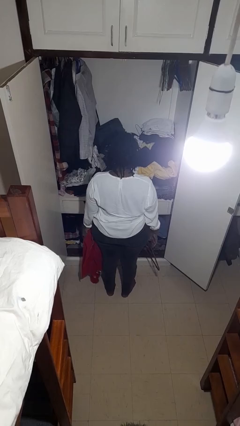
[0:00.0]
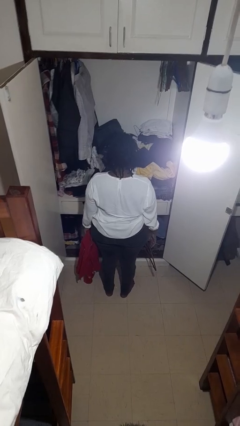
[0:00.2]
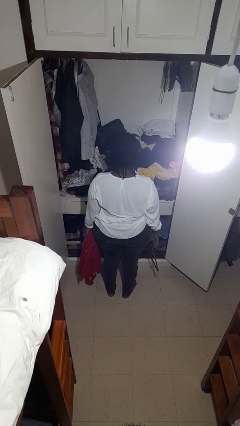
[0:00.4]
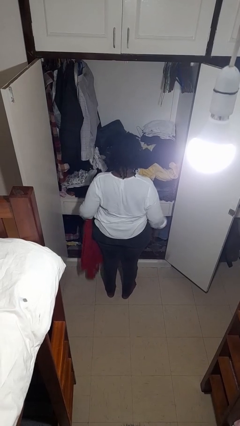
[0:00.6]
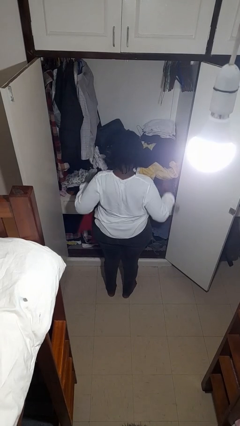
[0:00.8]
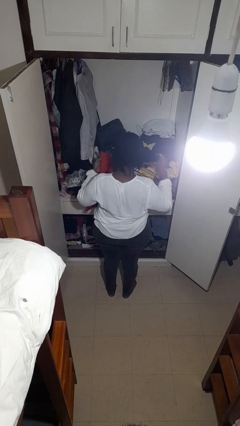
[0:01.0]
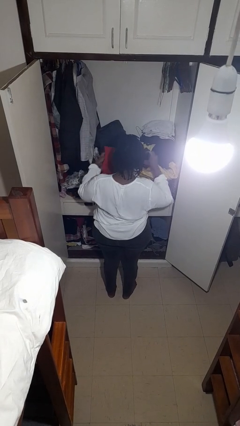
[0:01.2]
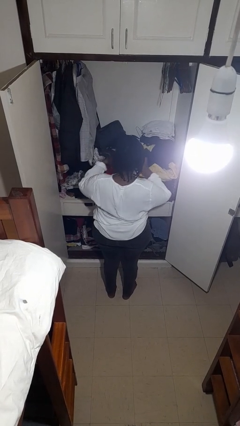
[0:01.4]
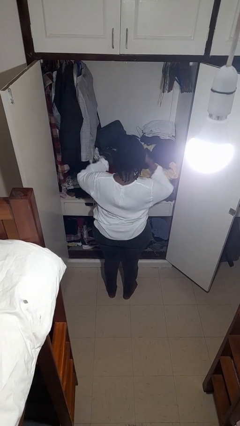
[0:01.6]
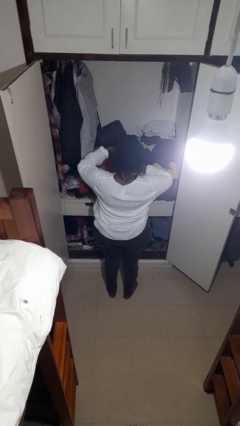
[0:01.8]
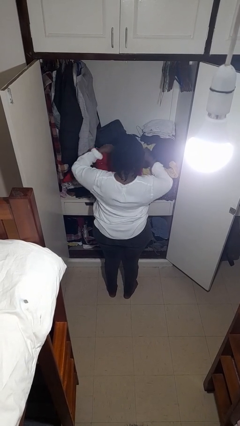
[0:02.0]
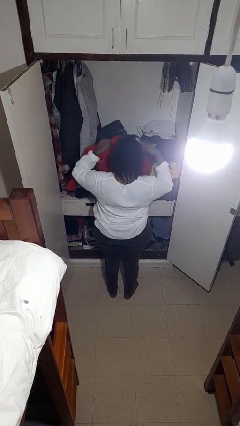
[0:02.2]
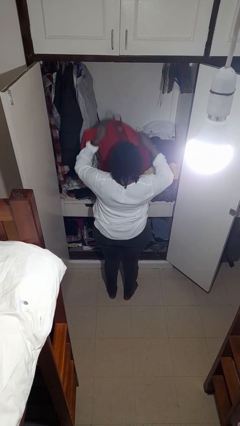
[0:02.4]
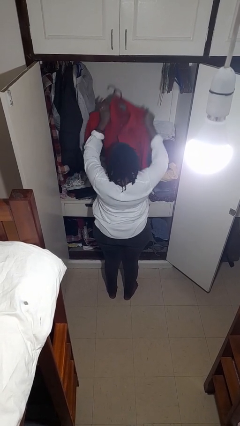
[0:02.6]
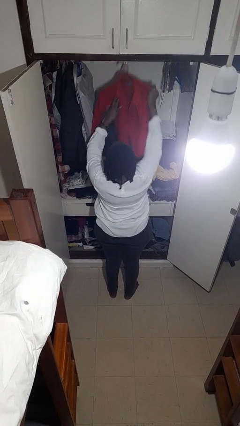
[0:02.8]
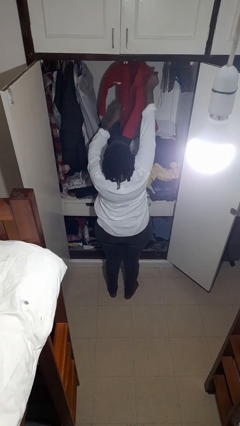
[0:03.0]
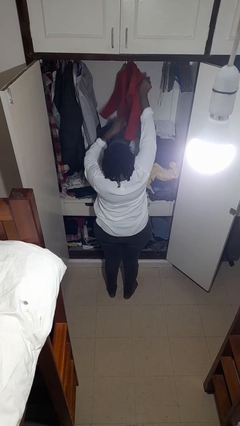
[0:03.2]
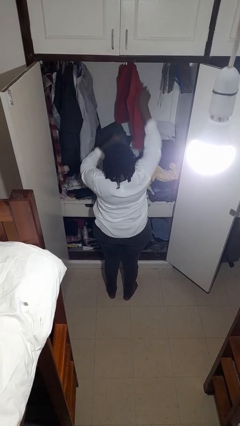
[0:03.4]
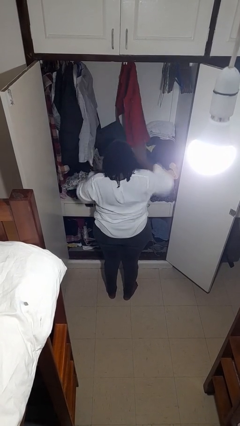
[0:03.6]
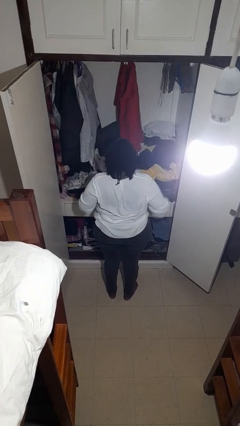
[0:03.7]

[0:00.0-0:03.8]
person puts clothes into closet

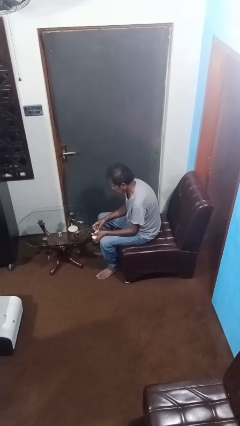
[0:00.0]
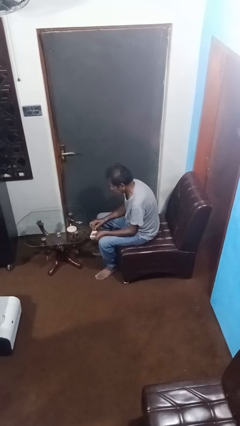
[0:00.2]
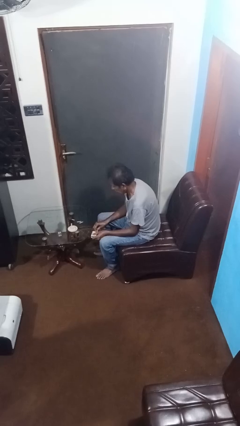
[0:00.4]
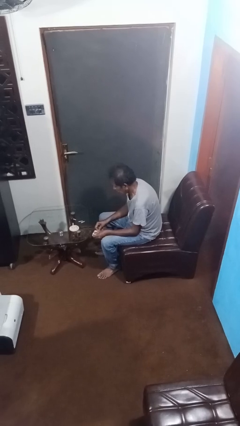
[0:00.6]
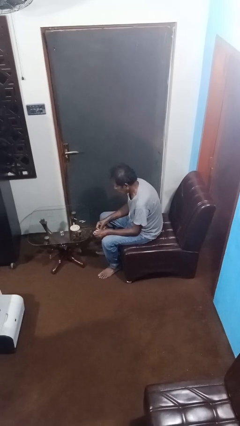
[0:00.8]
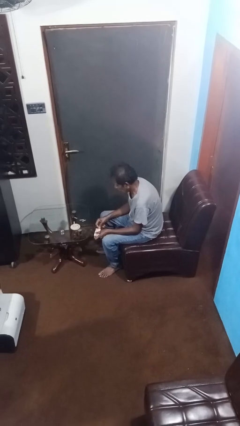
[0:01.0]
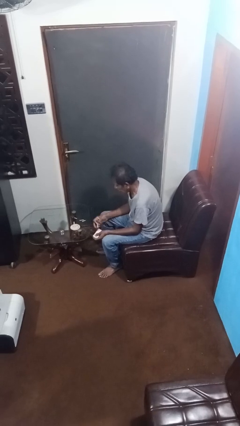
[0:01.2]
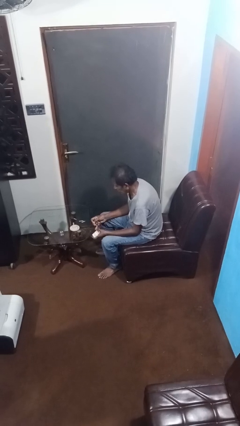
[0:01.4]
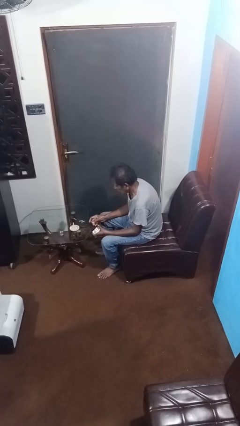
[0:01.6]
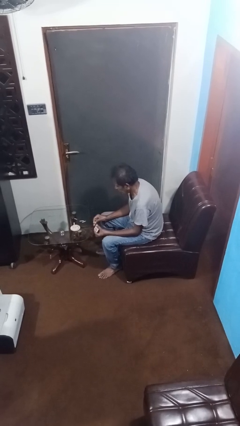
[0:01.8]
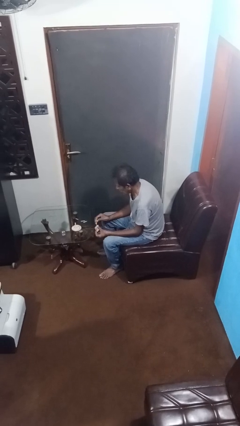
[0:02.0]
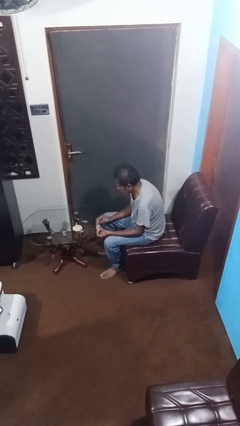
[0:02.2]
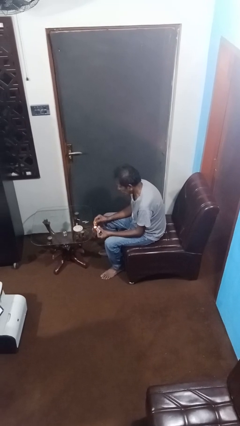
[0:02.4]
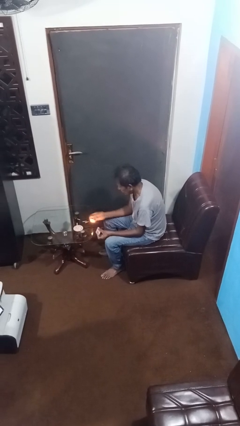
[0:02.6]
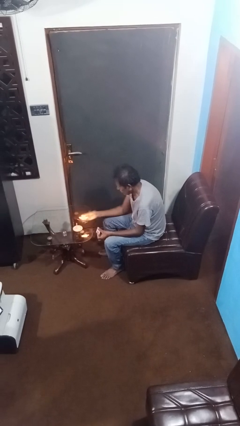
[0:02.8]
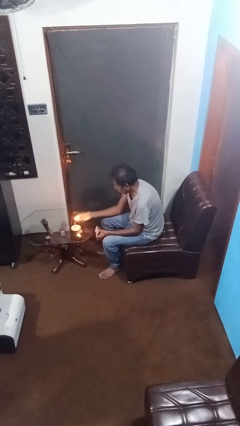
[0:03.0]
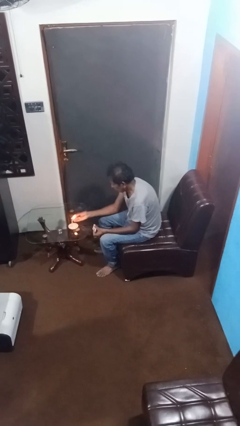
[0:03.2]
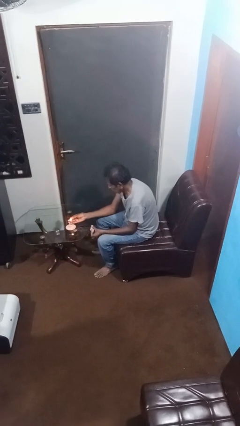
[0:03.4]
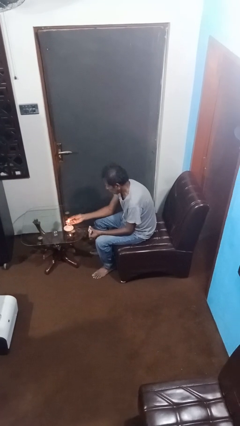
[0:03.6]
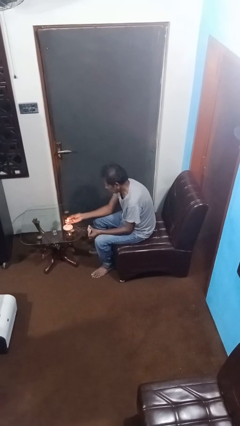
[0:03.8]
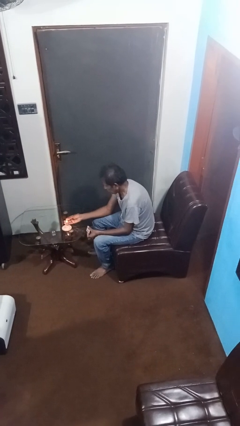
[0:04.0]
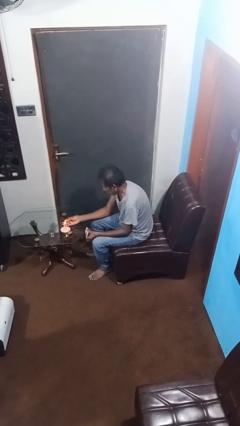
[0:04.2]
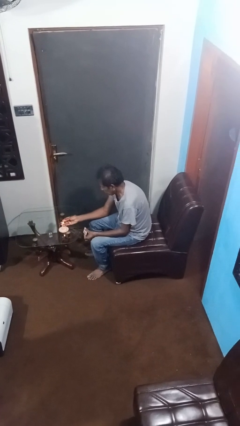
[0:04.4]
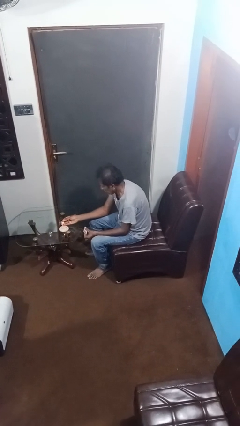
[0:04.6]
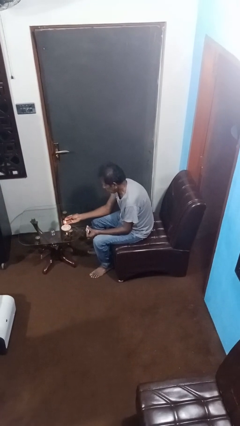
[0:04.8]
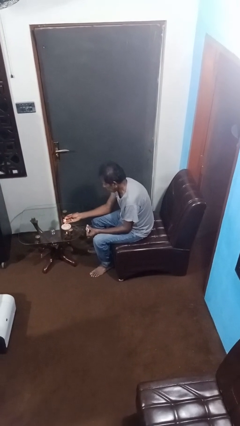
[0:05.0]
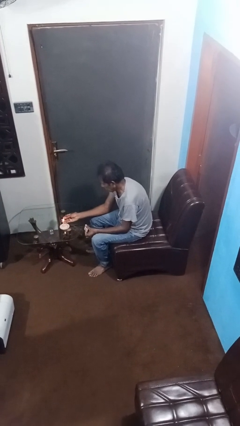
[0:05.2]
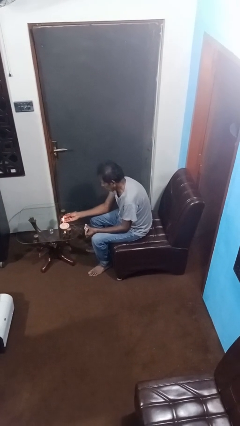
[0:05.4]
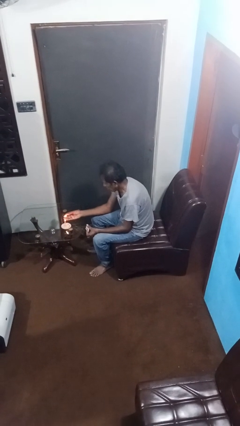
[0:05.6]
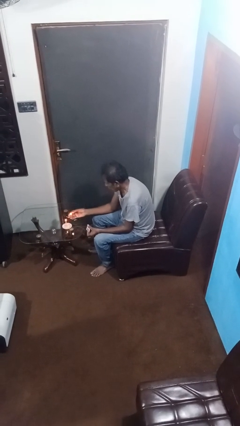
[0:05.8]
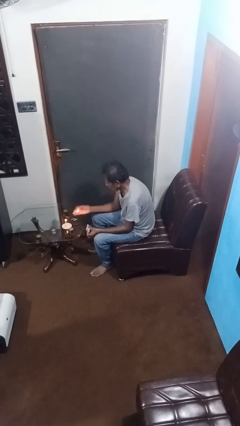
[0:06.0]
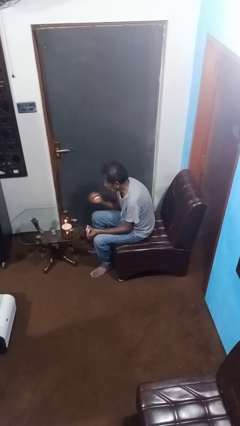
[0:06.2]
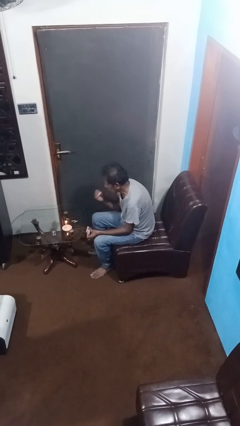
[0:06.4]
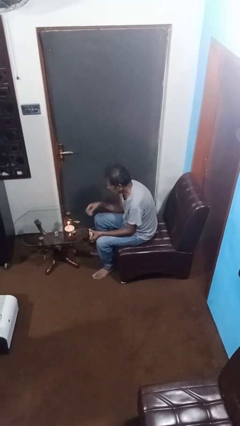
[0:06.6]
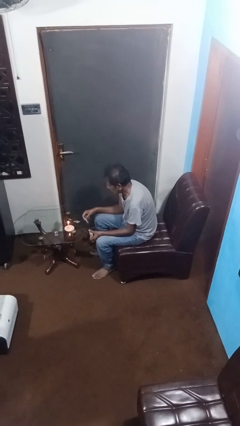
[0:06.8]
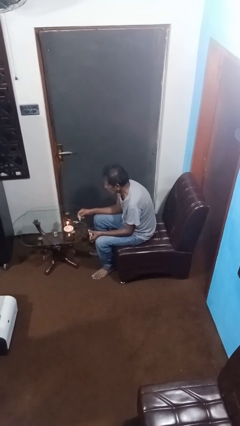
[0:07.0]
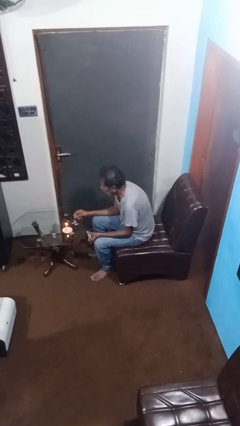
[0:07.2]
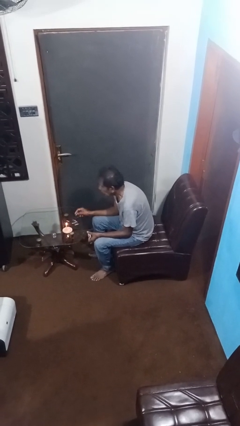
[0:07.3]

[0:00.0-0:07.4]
person lights candle

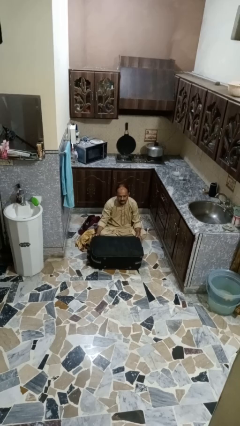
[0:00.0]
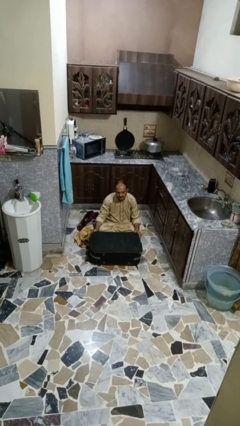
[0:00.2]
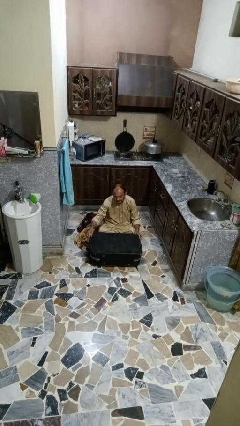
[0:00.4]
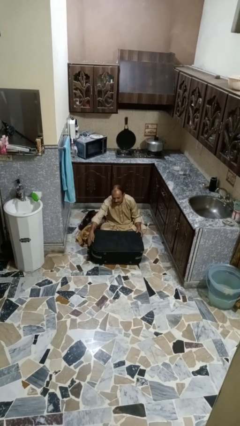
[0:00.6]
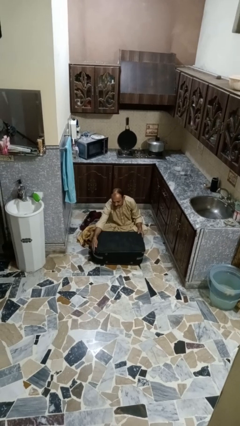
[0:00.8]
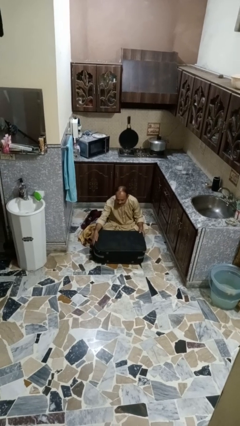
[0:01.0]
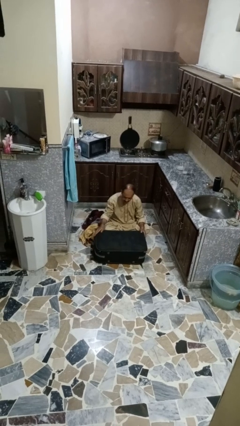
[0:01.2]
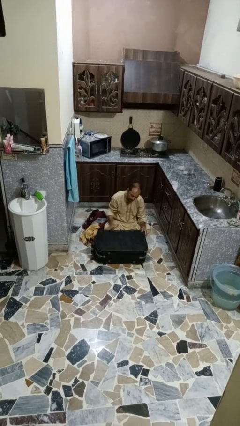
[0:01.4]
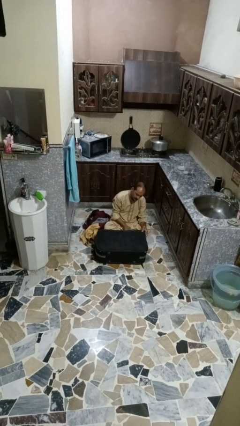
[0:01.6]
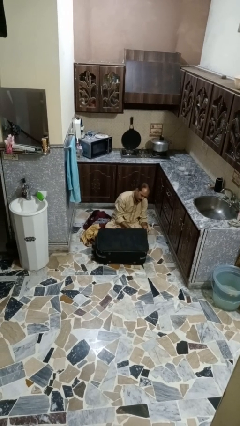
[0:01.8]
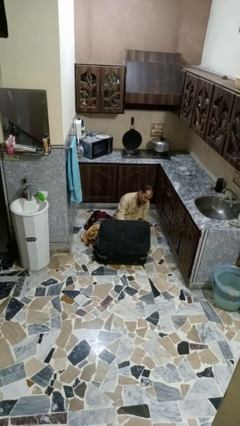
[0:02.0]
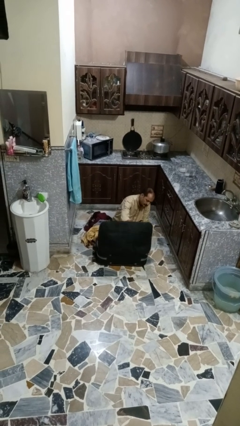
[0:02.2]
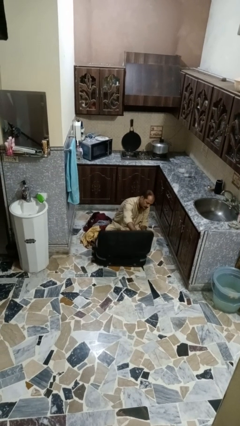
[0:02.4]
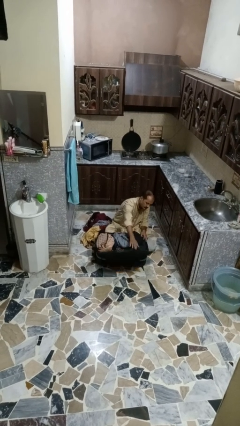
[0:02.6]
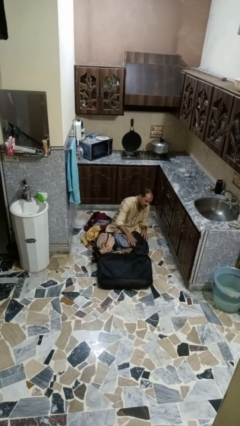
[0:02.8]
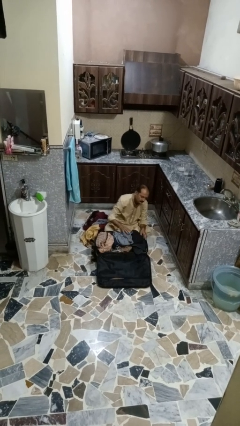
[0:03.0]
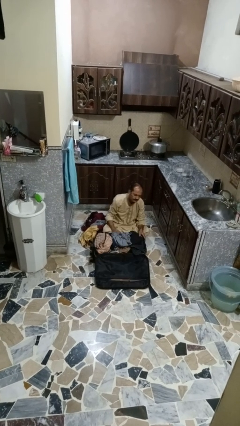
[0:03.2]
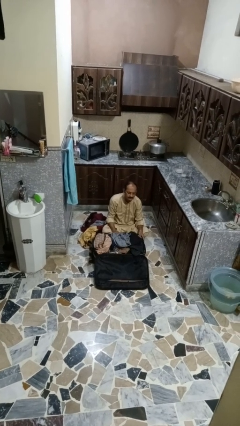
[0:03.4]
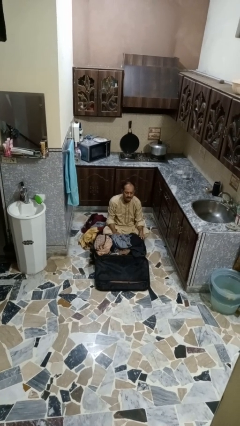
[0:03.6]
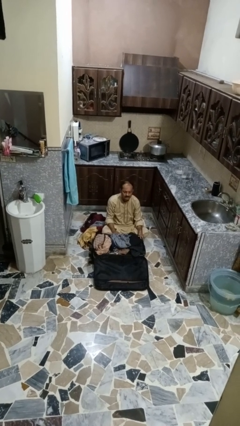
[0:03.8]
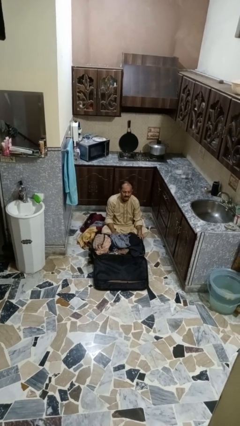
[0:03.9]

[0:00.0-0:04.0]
person opens suitcase

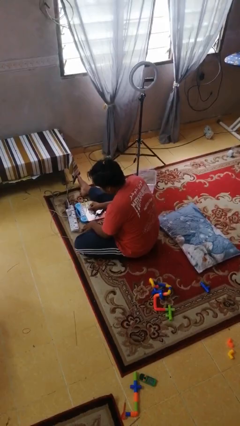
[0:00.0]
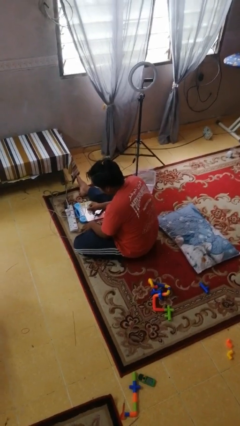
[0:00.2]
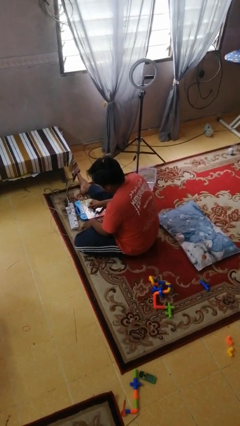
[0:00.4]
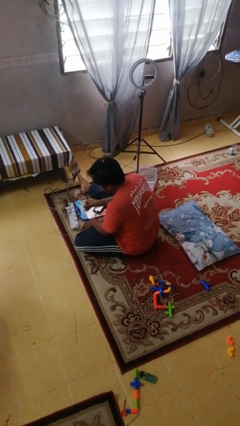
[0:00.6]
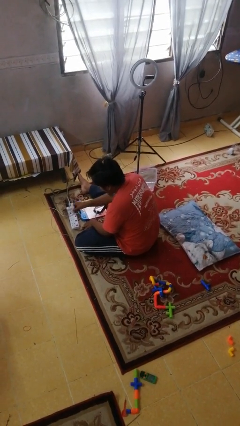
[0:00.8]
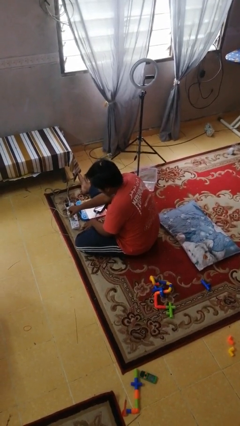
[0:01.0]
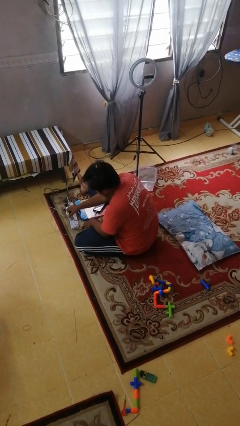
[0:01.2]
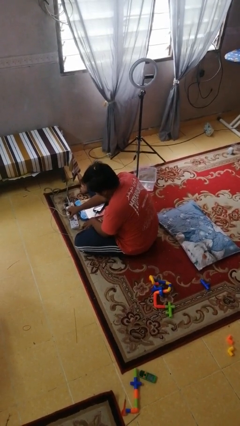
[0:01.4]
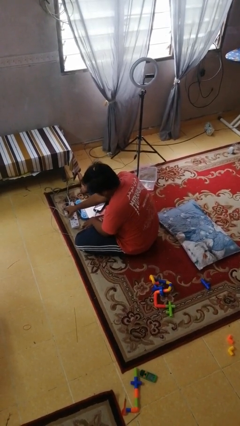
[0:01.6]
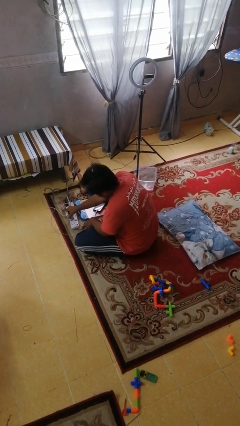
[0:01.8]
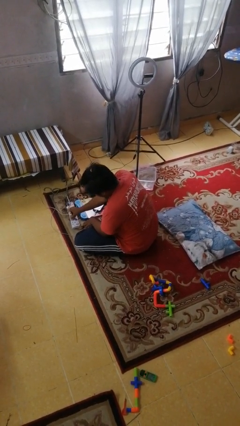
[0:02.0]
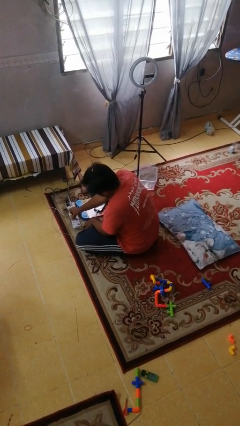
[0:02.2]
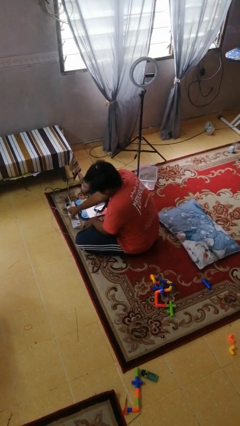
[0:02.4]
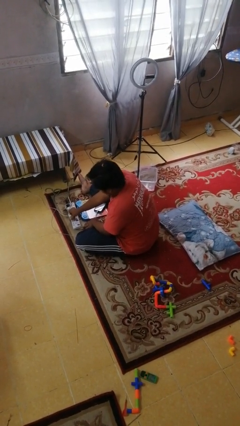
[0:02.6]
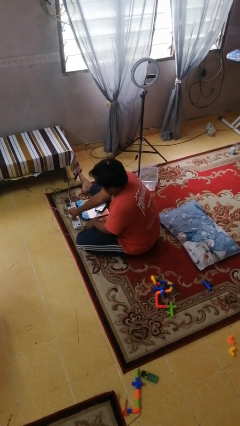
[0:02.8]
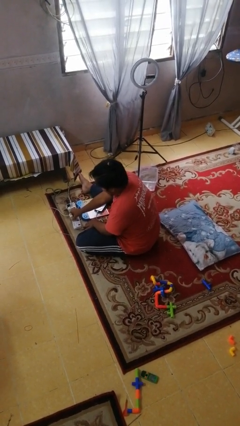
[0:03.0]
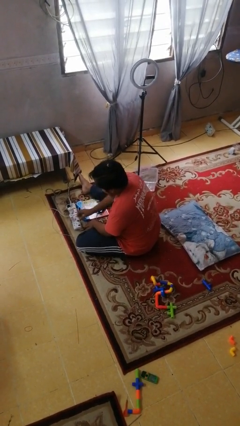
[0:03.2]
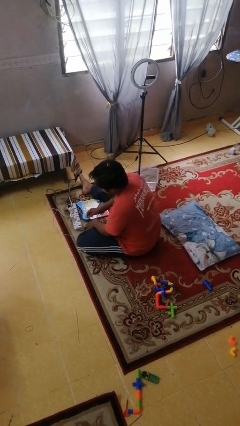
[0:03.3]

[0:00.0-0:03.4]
person plugs into electrical socket
